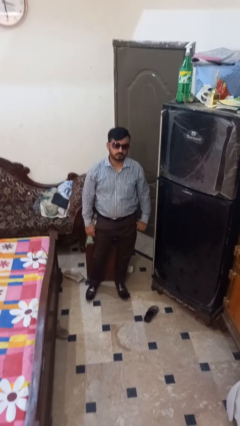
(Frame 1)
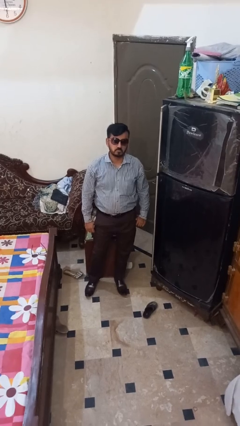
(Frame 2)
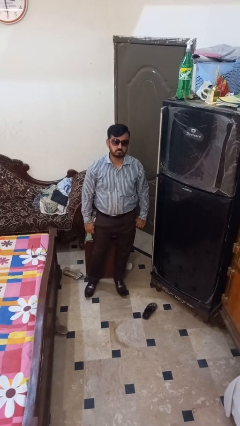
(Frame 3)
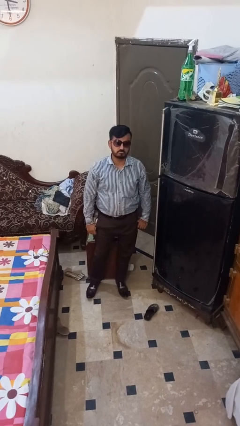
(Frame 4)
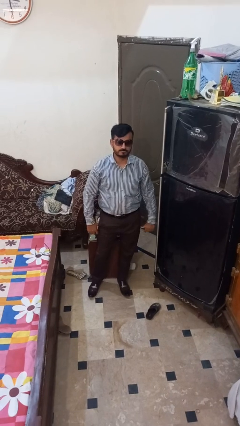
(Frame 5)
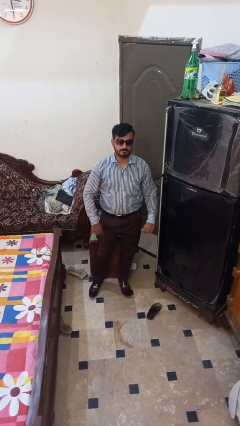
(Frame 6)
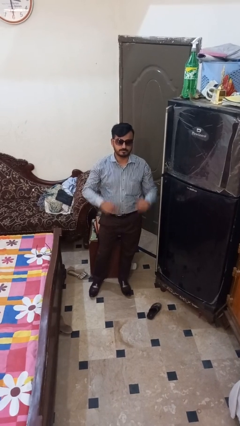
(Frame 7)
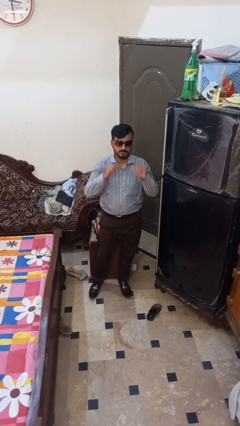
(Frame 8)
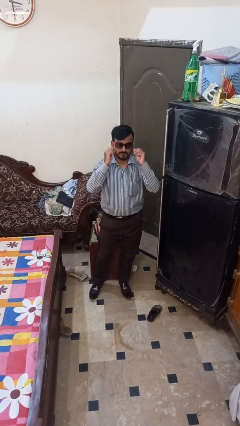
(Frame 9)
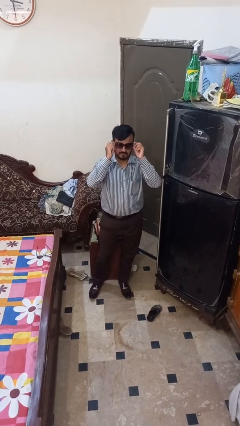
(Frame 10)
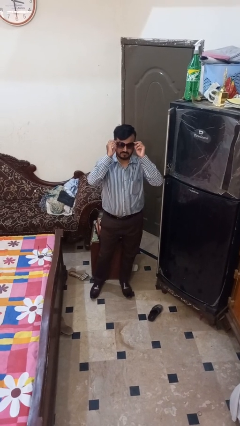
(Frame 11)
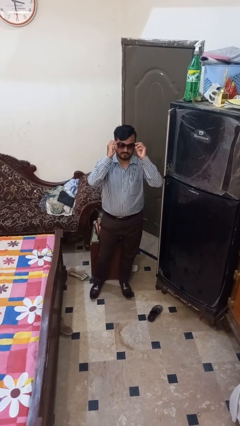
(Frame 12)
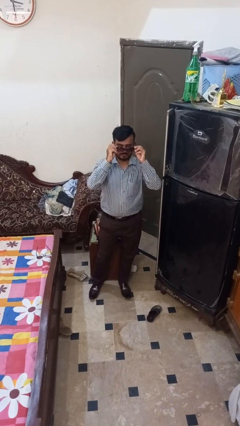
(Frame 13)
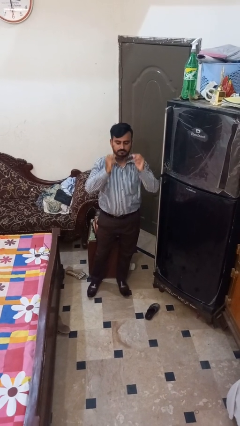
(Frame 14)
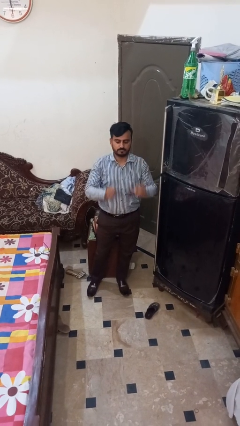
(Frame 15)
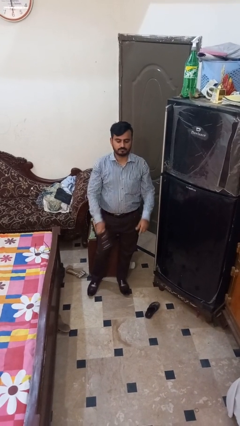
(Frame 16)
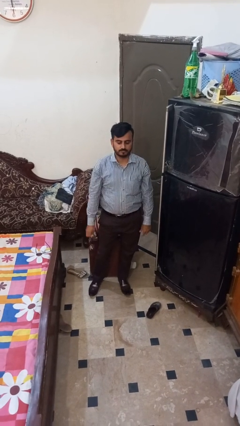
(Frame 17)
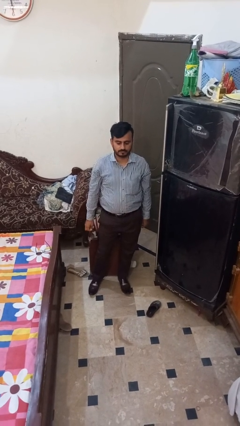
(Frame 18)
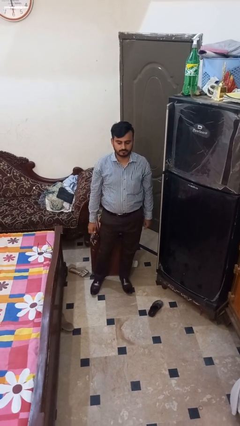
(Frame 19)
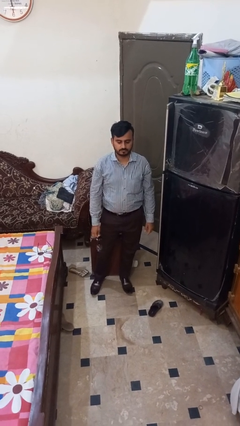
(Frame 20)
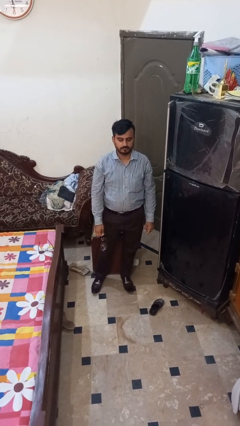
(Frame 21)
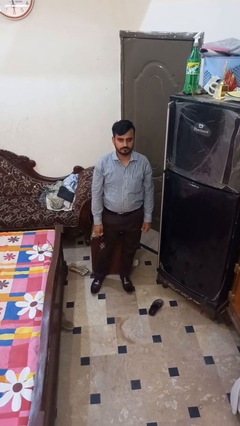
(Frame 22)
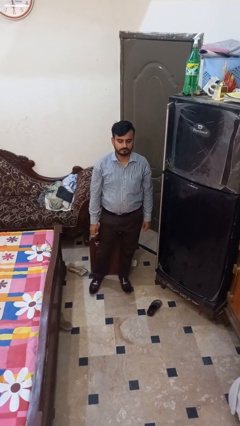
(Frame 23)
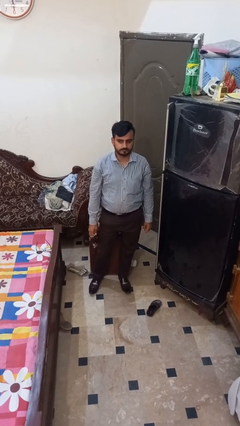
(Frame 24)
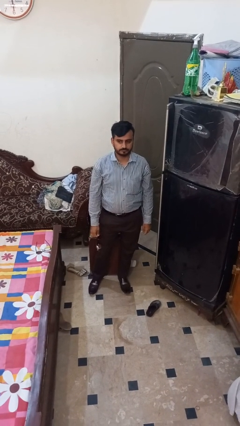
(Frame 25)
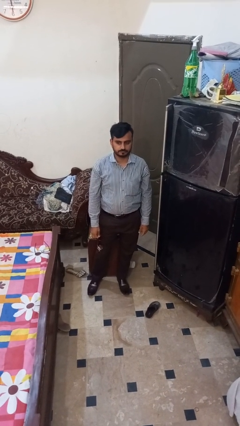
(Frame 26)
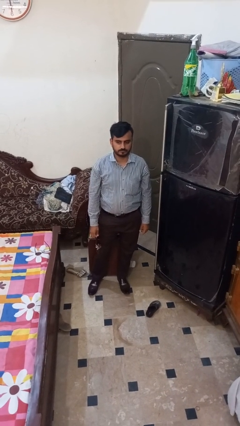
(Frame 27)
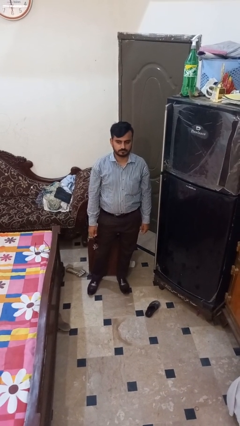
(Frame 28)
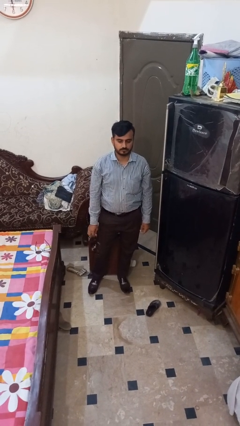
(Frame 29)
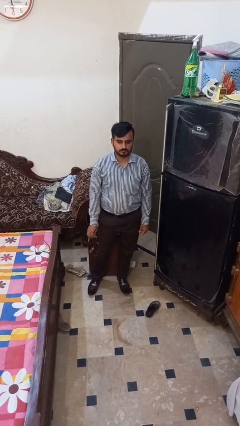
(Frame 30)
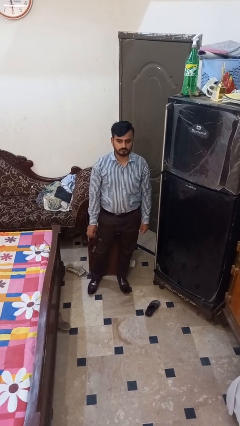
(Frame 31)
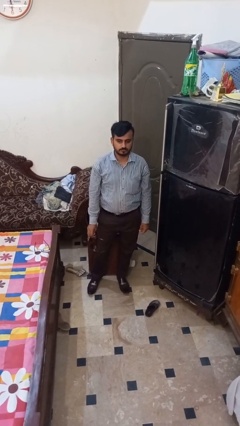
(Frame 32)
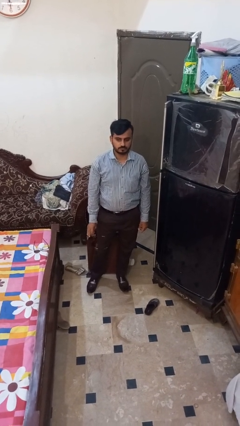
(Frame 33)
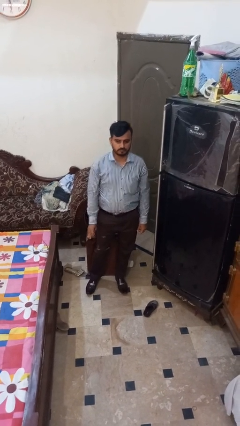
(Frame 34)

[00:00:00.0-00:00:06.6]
person takes off sunglasses

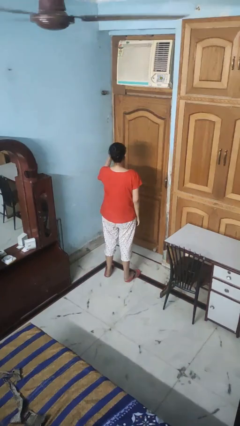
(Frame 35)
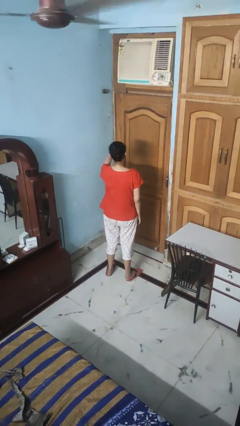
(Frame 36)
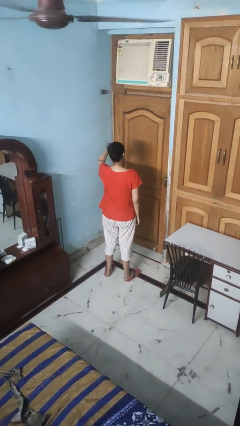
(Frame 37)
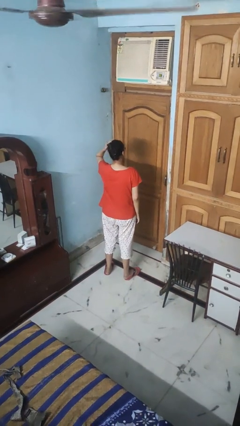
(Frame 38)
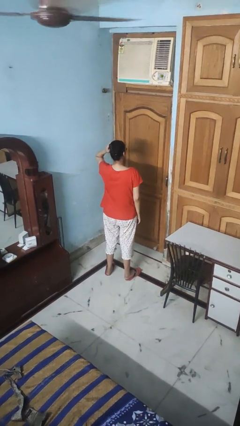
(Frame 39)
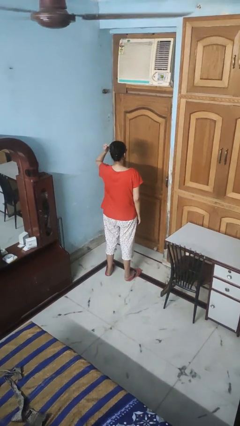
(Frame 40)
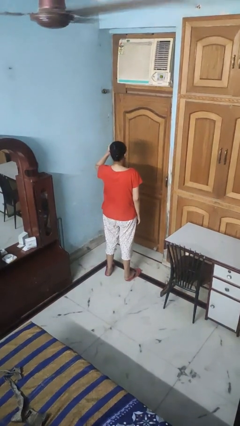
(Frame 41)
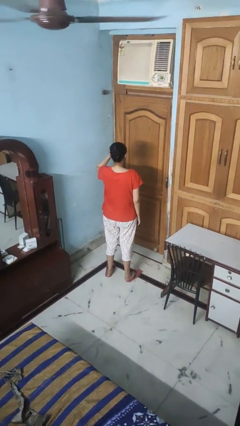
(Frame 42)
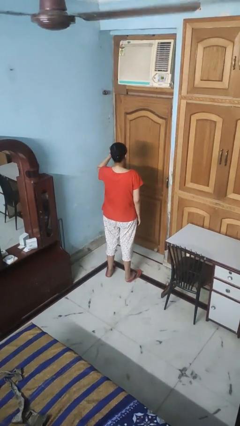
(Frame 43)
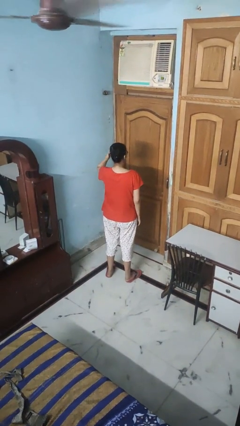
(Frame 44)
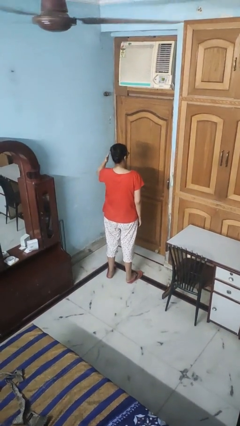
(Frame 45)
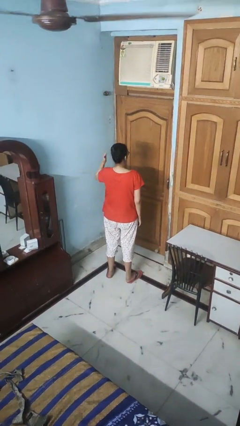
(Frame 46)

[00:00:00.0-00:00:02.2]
person strokes hair

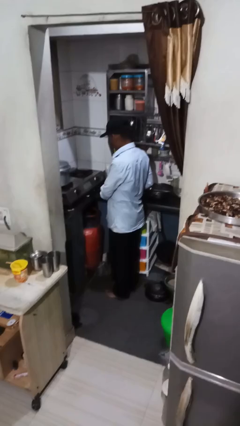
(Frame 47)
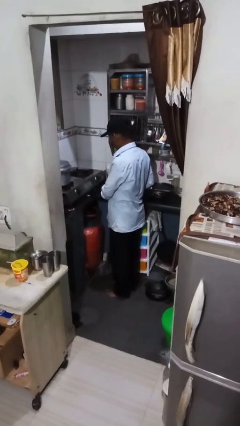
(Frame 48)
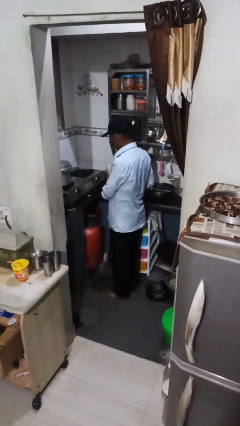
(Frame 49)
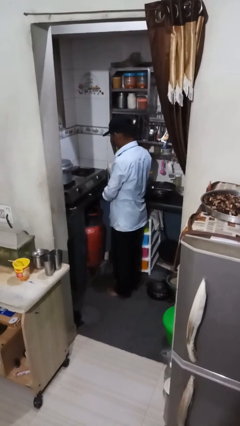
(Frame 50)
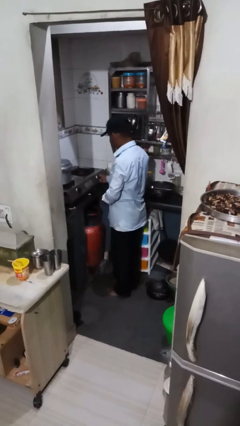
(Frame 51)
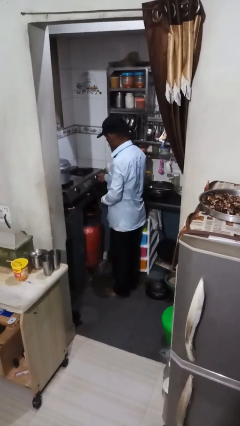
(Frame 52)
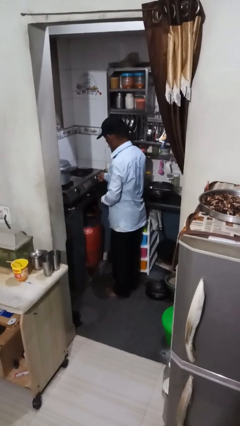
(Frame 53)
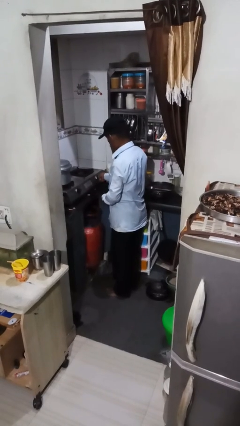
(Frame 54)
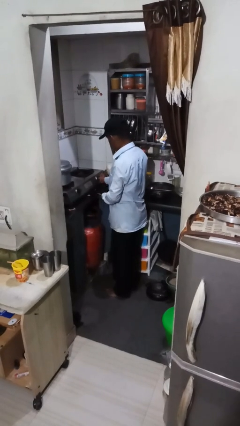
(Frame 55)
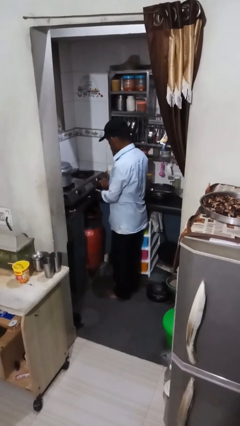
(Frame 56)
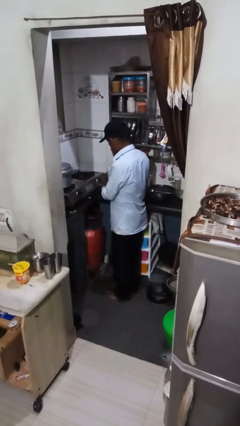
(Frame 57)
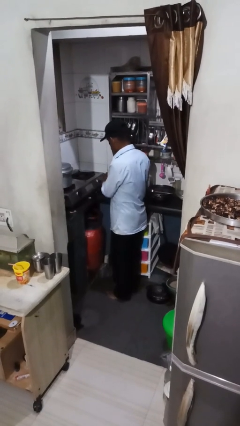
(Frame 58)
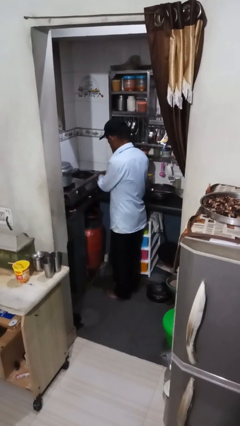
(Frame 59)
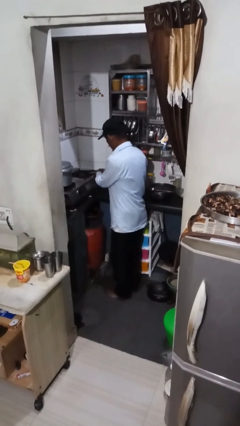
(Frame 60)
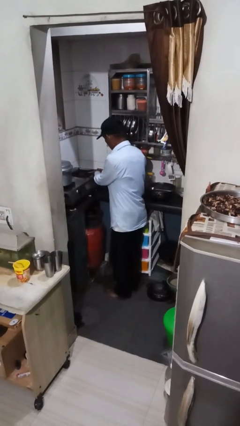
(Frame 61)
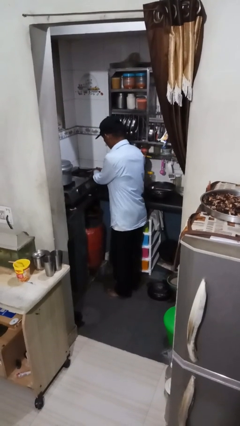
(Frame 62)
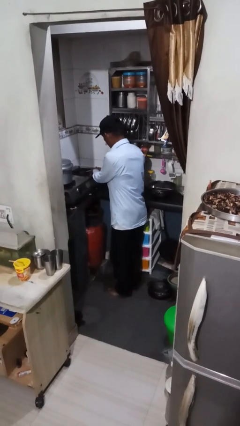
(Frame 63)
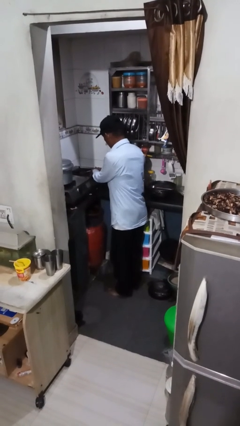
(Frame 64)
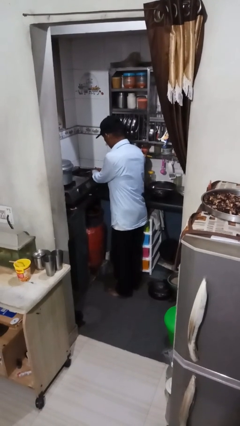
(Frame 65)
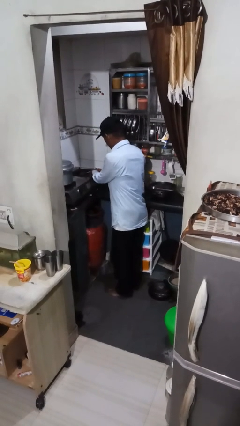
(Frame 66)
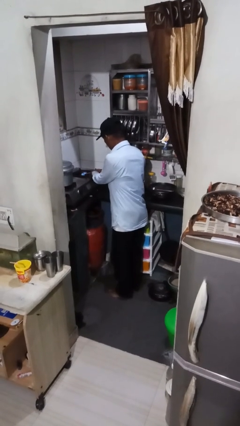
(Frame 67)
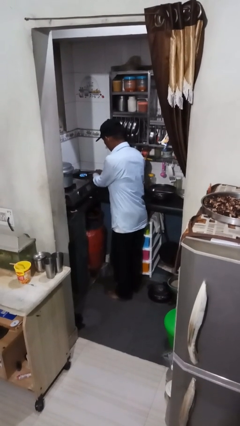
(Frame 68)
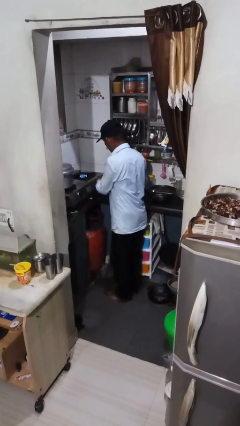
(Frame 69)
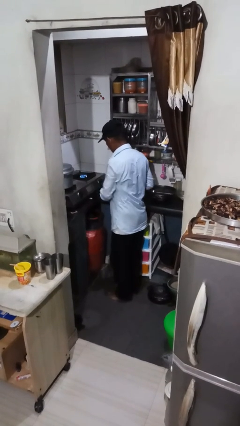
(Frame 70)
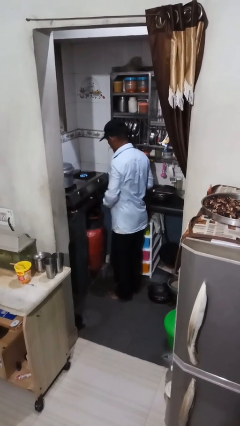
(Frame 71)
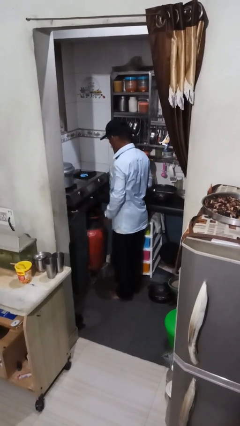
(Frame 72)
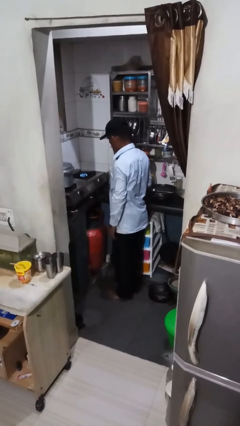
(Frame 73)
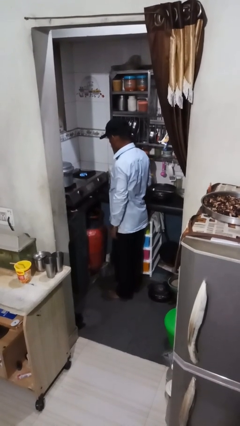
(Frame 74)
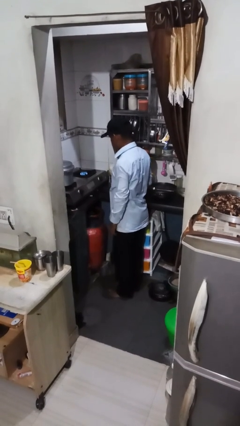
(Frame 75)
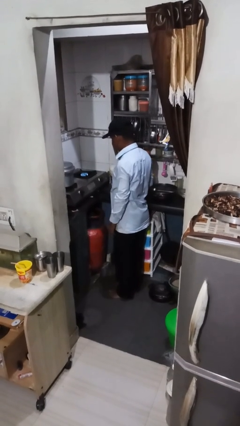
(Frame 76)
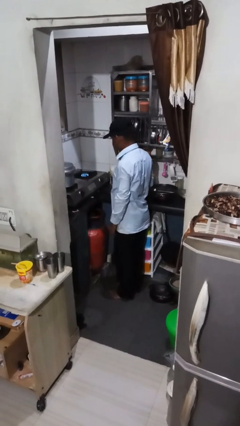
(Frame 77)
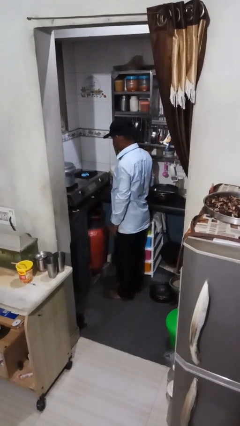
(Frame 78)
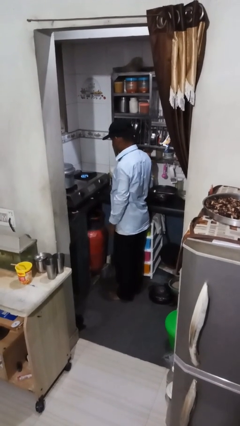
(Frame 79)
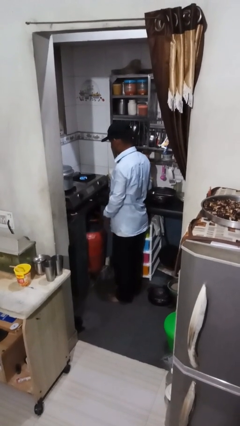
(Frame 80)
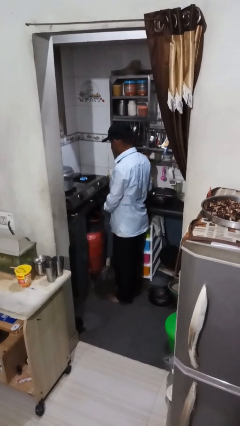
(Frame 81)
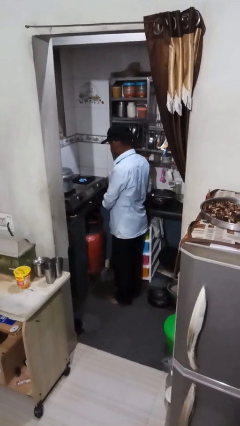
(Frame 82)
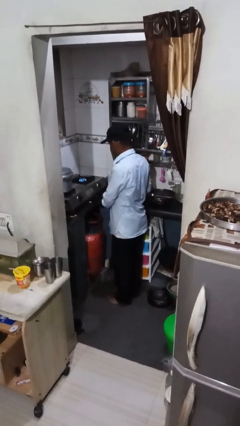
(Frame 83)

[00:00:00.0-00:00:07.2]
person turns on stovetop

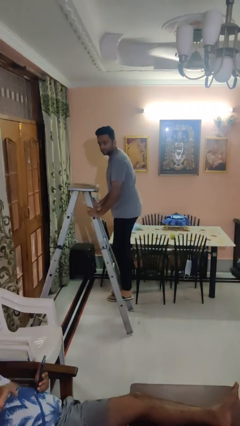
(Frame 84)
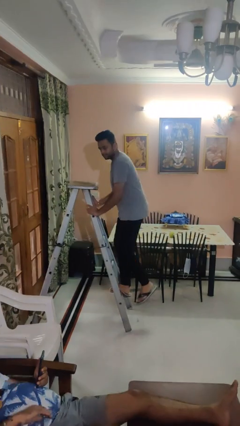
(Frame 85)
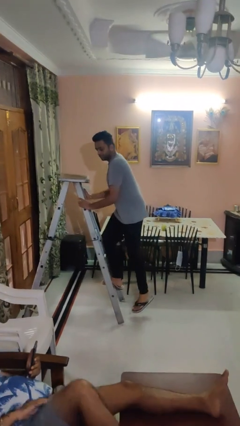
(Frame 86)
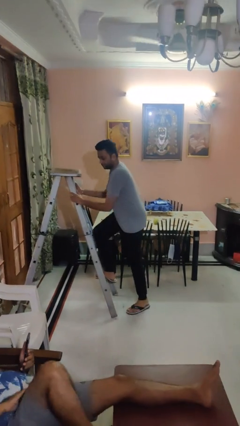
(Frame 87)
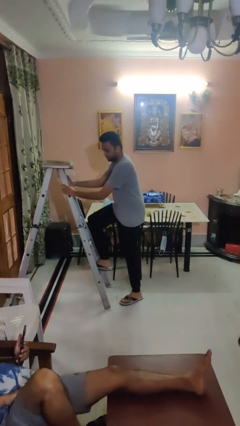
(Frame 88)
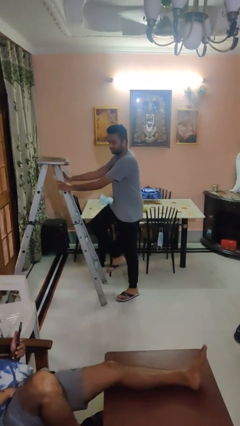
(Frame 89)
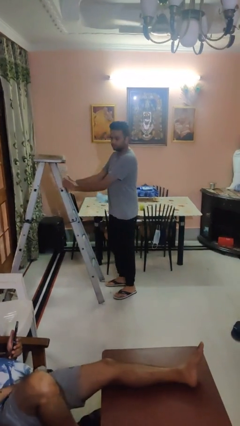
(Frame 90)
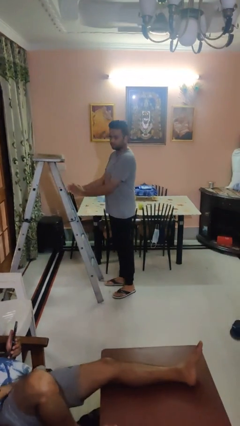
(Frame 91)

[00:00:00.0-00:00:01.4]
person climbs down ladder
